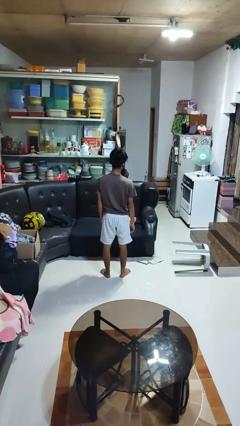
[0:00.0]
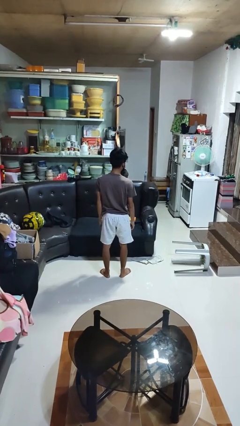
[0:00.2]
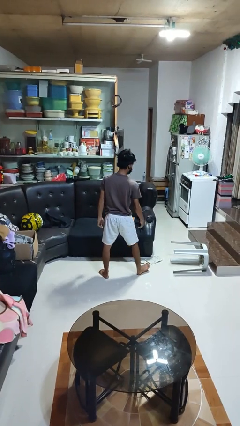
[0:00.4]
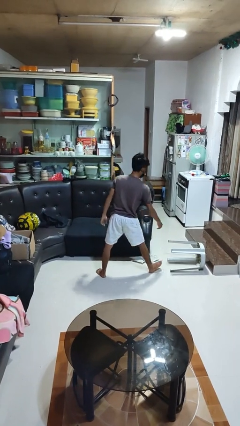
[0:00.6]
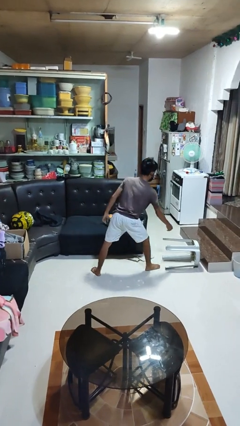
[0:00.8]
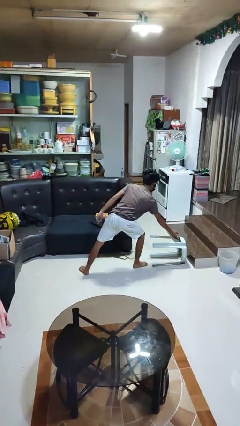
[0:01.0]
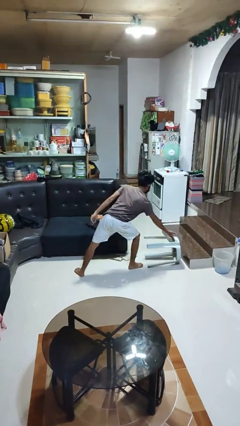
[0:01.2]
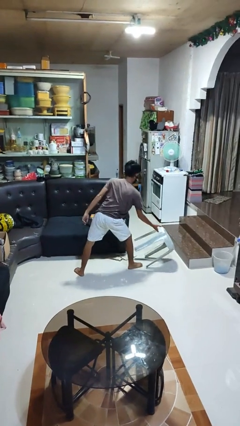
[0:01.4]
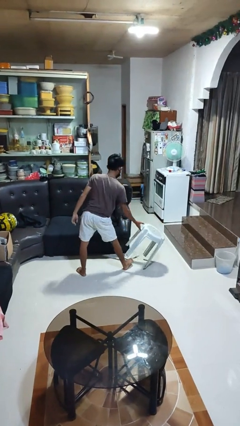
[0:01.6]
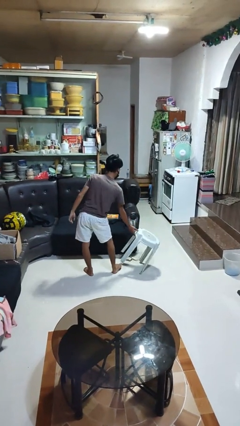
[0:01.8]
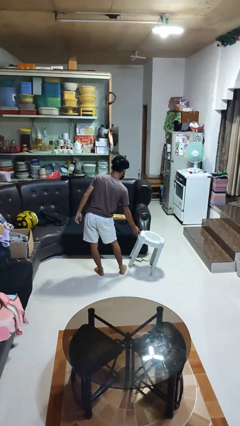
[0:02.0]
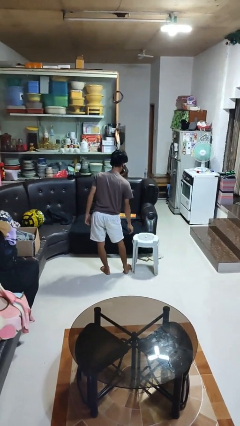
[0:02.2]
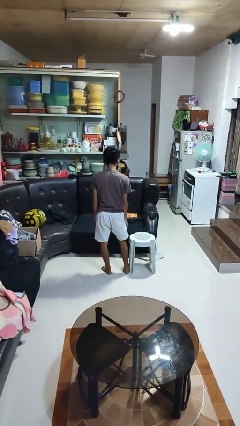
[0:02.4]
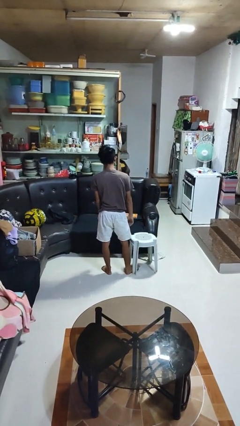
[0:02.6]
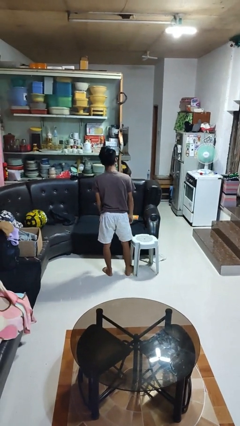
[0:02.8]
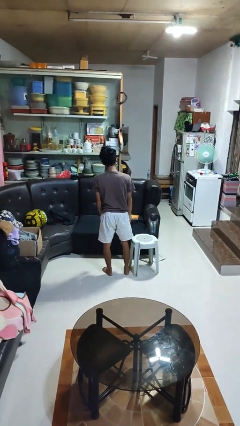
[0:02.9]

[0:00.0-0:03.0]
person sets upright furniture

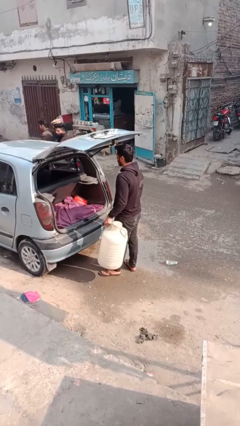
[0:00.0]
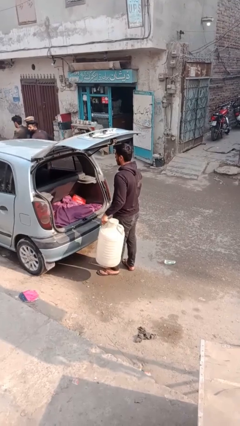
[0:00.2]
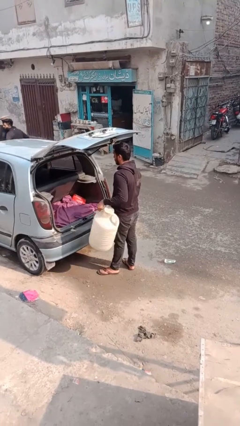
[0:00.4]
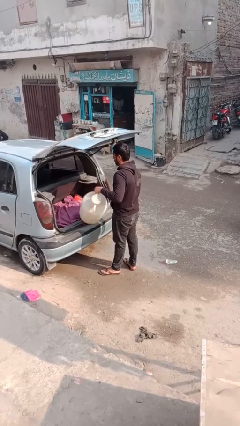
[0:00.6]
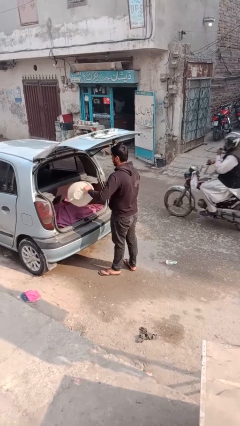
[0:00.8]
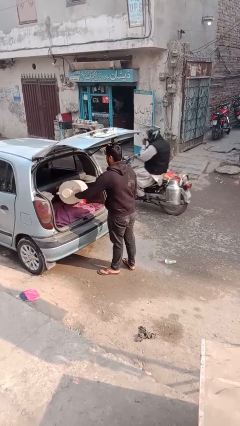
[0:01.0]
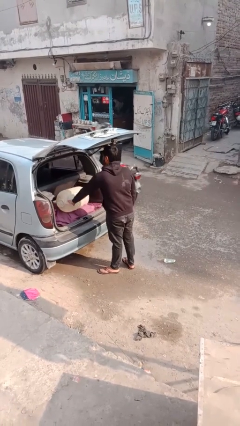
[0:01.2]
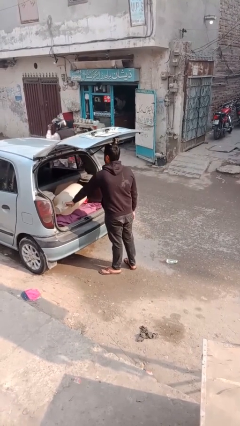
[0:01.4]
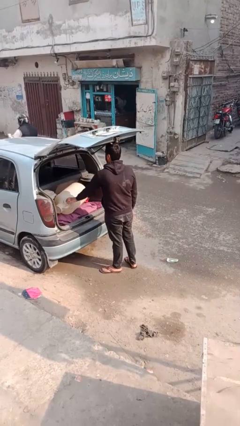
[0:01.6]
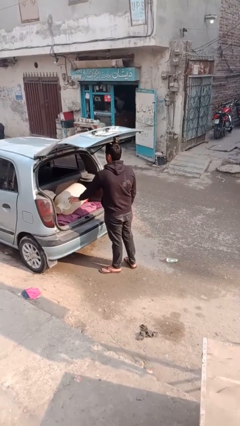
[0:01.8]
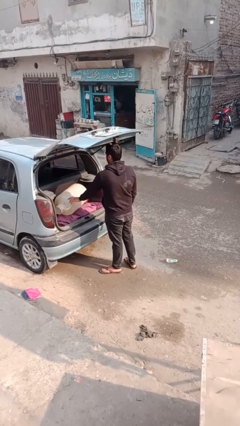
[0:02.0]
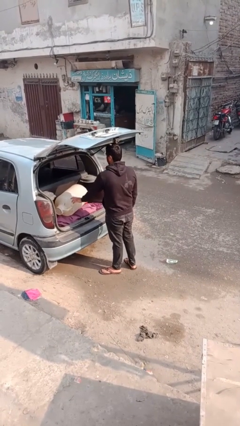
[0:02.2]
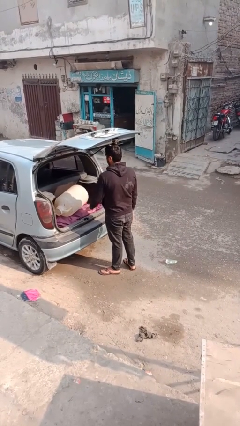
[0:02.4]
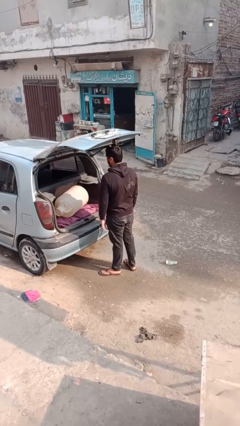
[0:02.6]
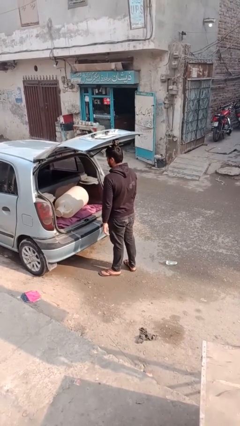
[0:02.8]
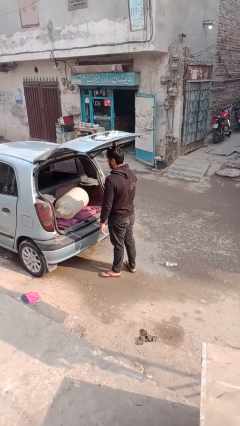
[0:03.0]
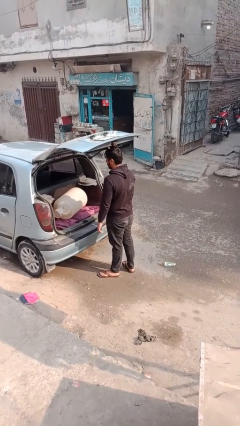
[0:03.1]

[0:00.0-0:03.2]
person loads car

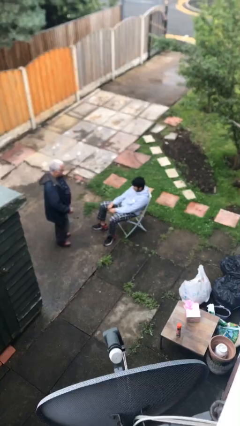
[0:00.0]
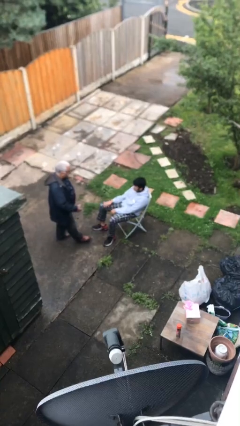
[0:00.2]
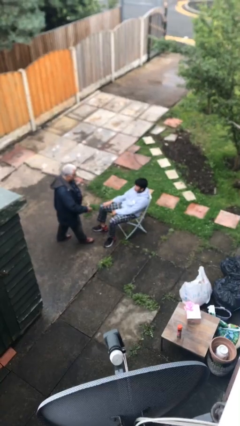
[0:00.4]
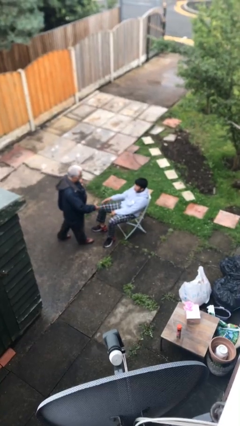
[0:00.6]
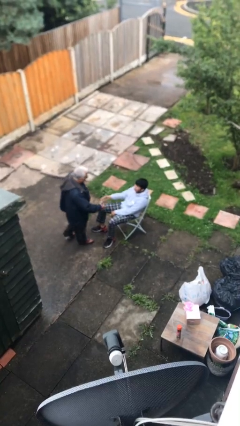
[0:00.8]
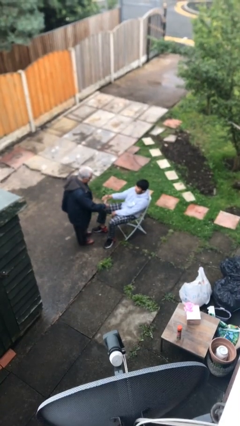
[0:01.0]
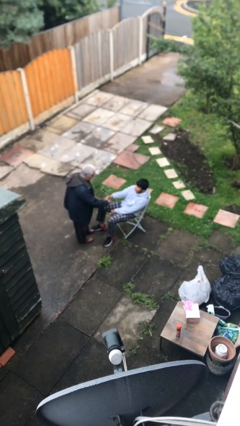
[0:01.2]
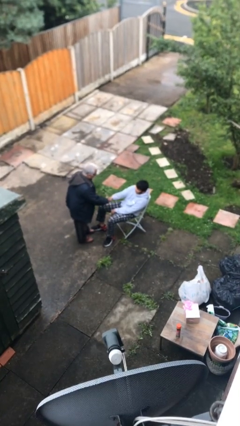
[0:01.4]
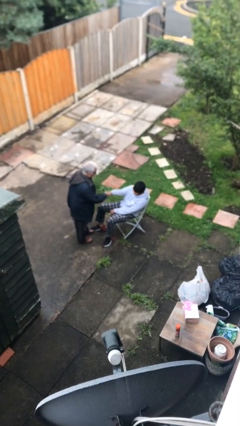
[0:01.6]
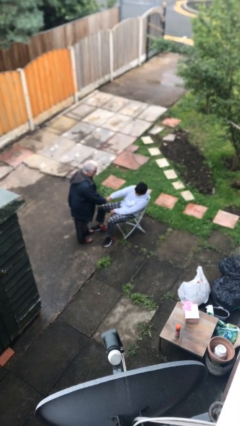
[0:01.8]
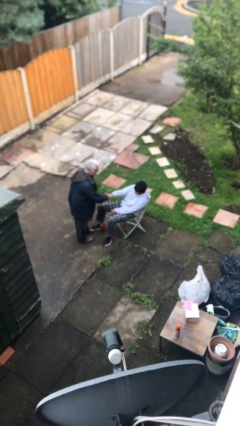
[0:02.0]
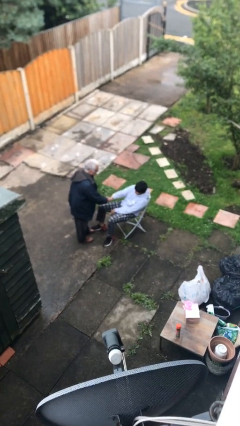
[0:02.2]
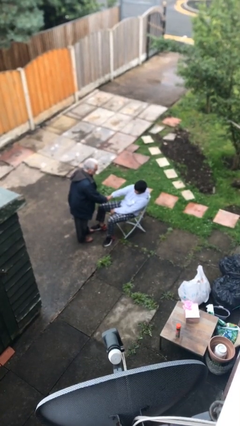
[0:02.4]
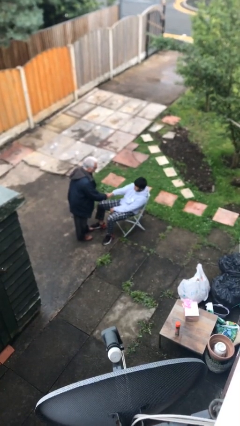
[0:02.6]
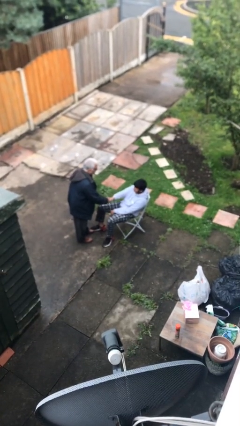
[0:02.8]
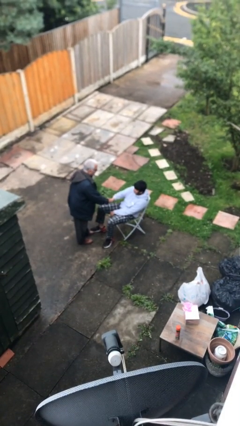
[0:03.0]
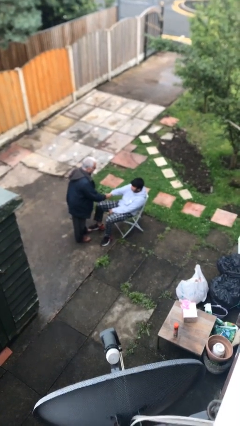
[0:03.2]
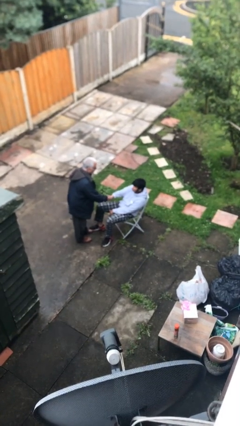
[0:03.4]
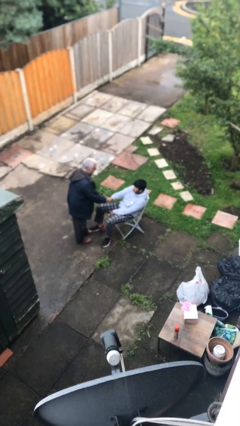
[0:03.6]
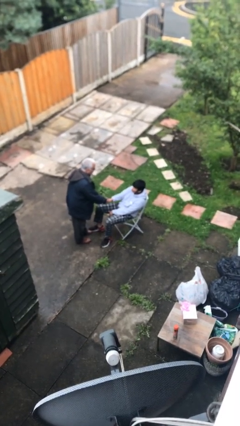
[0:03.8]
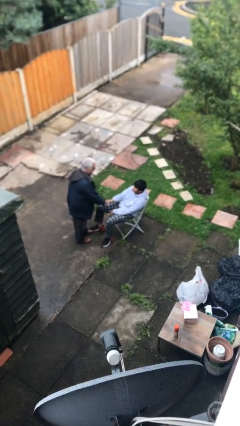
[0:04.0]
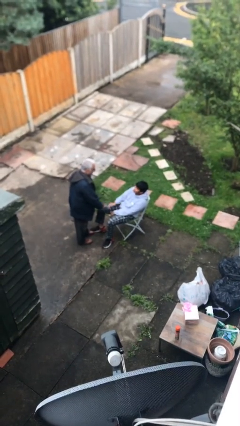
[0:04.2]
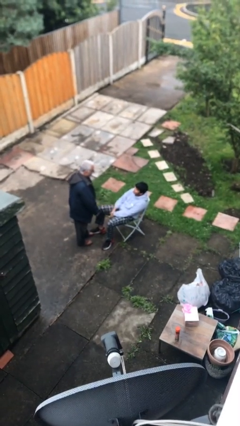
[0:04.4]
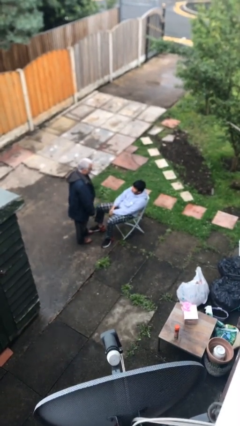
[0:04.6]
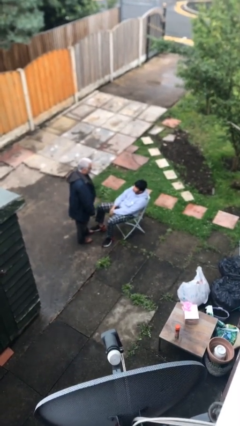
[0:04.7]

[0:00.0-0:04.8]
person shakes hand

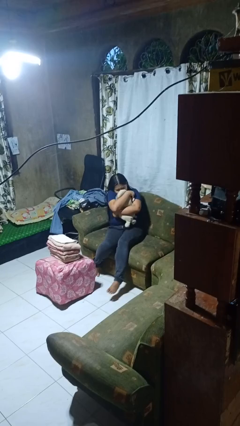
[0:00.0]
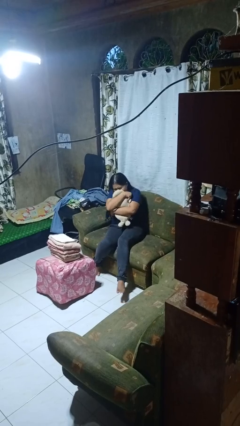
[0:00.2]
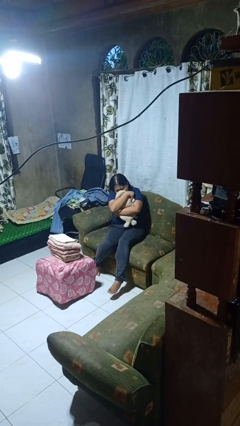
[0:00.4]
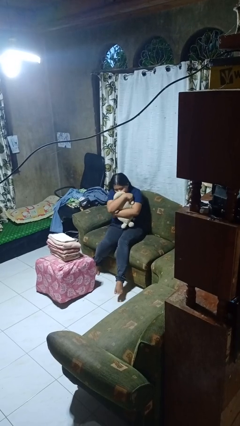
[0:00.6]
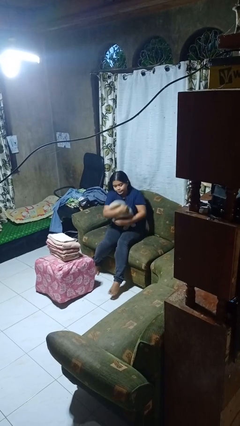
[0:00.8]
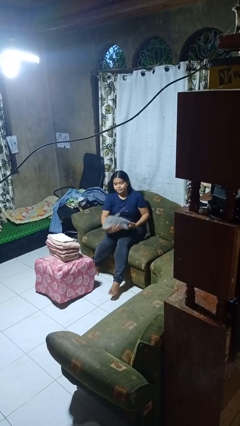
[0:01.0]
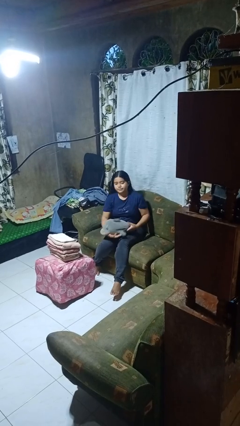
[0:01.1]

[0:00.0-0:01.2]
person hugs stuffed animal

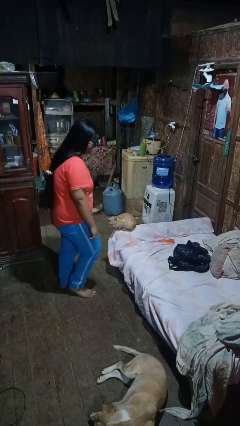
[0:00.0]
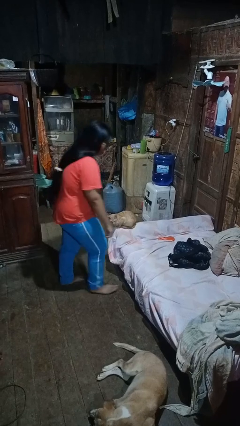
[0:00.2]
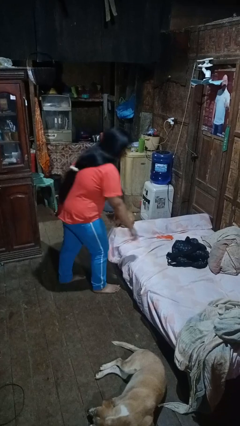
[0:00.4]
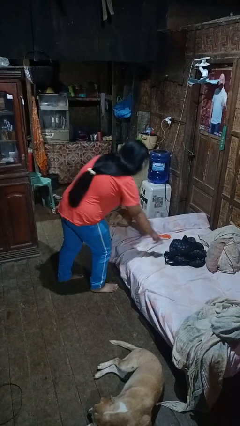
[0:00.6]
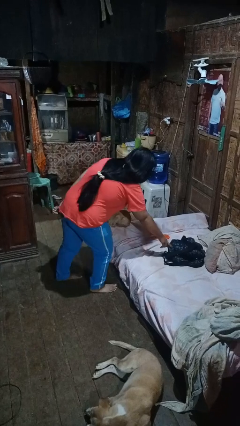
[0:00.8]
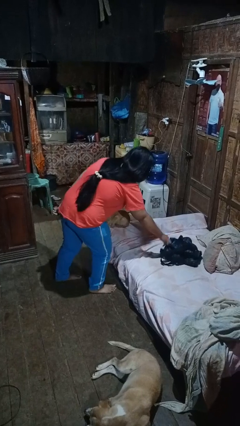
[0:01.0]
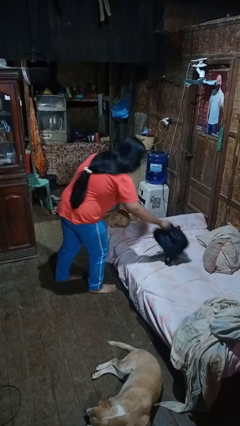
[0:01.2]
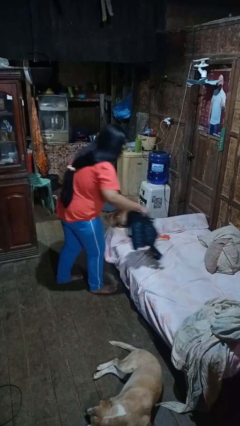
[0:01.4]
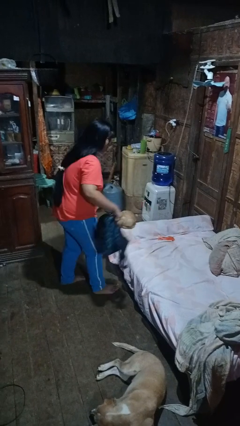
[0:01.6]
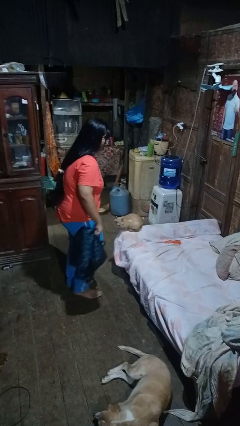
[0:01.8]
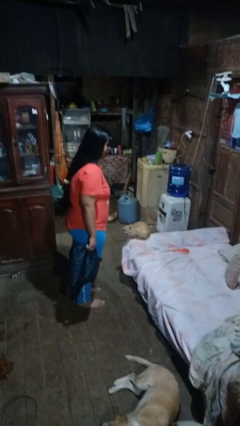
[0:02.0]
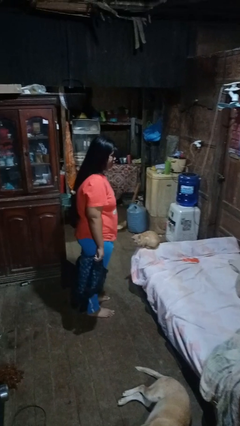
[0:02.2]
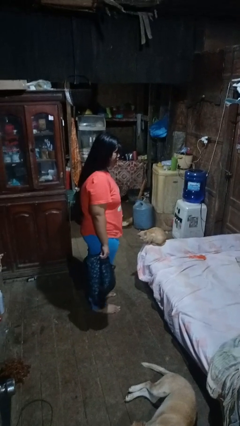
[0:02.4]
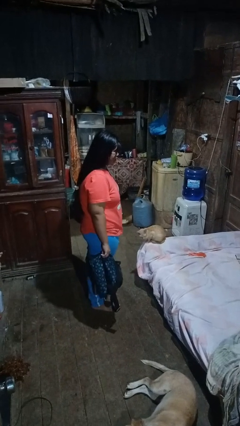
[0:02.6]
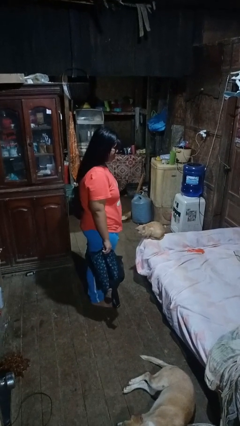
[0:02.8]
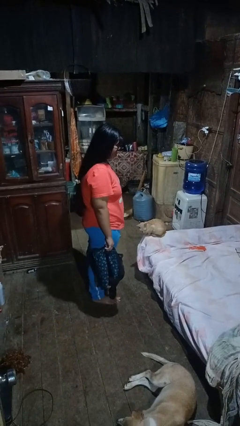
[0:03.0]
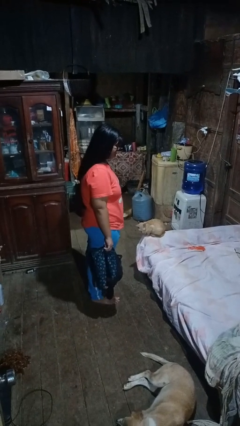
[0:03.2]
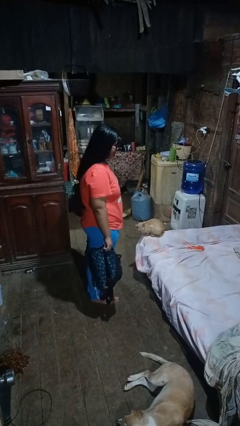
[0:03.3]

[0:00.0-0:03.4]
person picks up object from bed

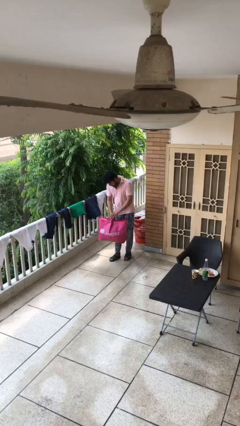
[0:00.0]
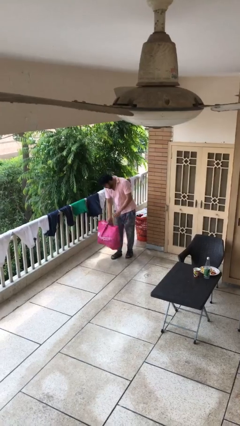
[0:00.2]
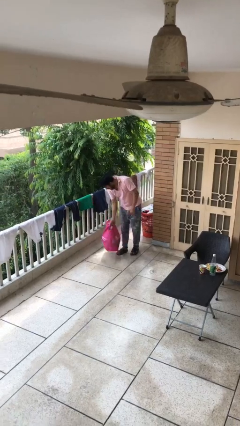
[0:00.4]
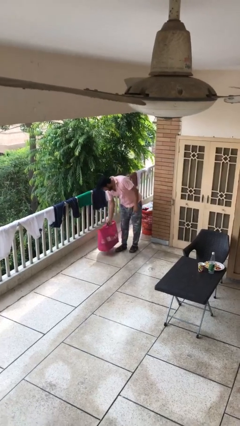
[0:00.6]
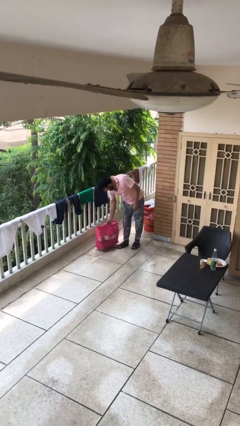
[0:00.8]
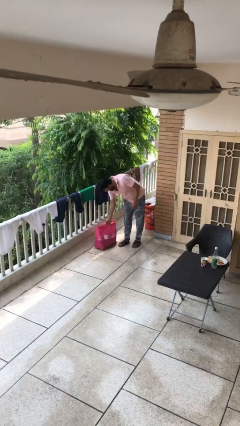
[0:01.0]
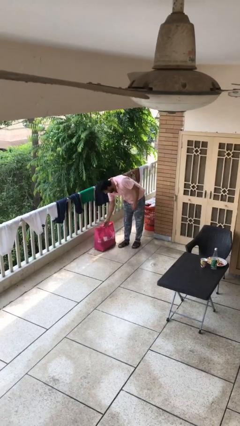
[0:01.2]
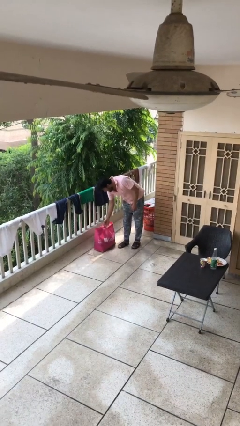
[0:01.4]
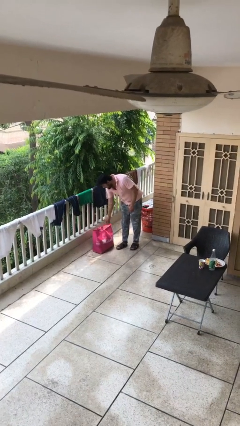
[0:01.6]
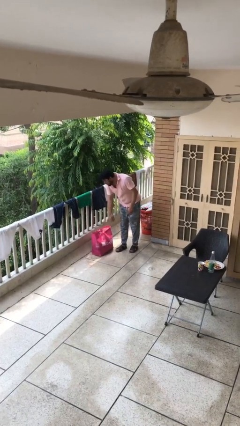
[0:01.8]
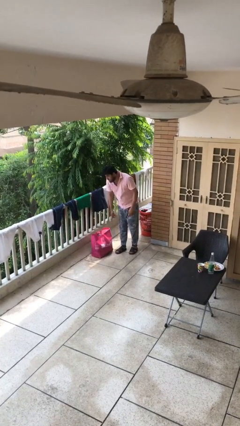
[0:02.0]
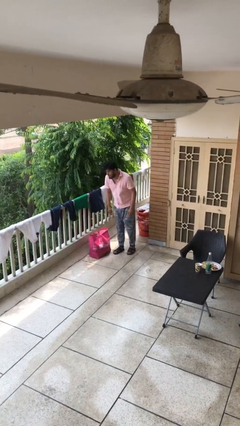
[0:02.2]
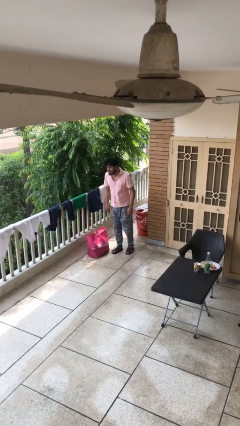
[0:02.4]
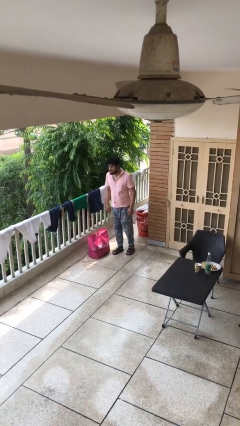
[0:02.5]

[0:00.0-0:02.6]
person puts down object on floor
